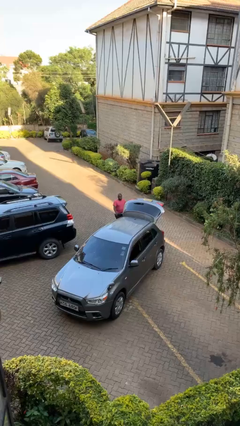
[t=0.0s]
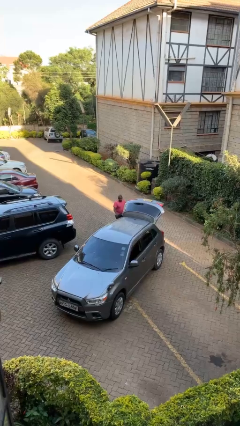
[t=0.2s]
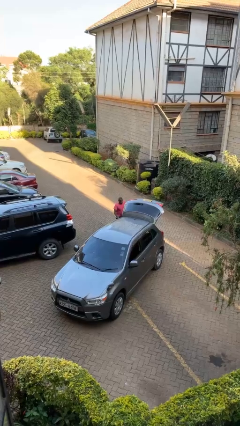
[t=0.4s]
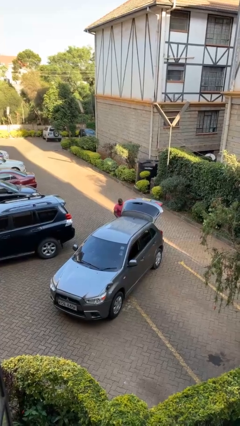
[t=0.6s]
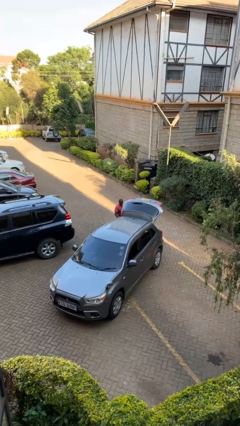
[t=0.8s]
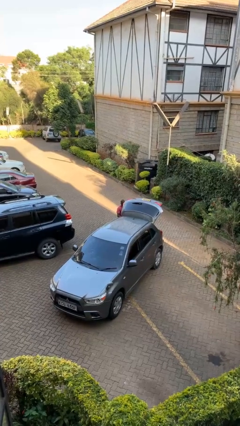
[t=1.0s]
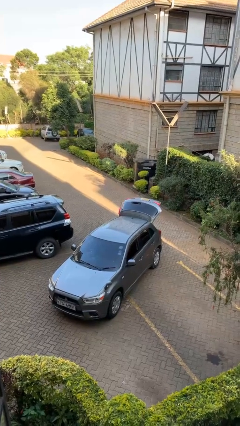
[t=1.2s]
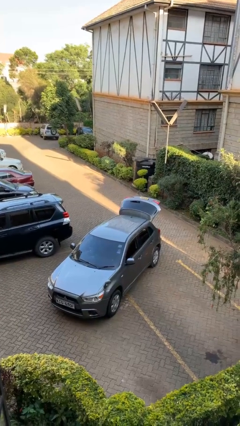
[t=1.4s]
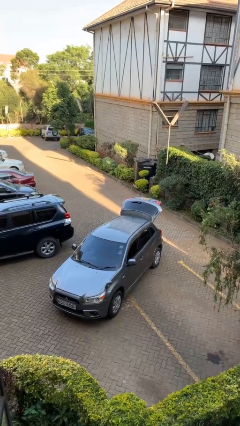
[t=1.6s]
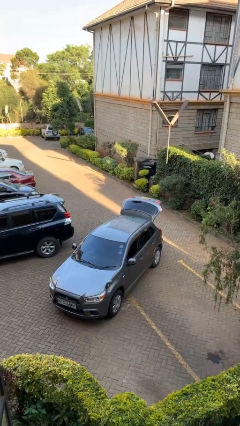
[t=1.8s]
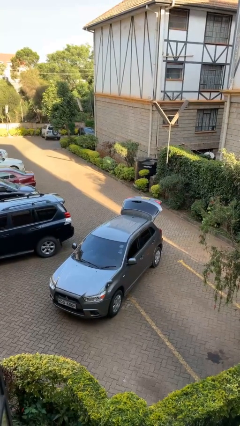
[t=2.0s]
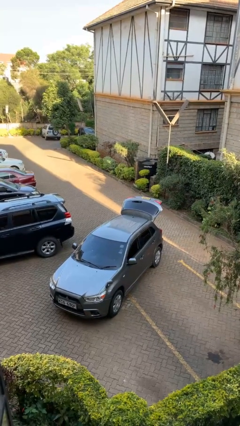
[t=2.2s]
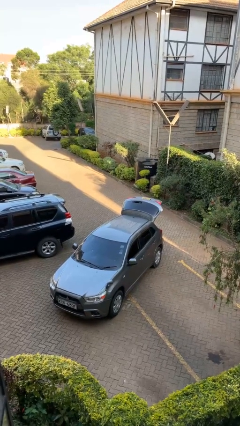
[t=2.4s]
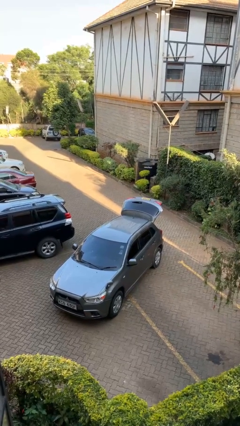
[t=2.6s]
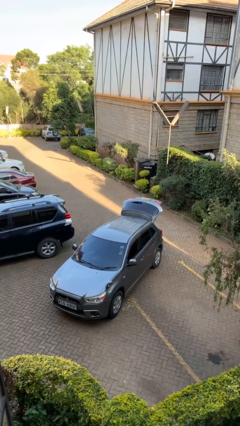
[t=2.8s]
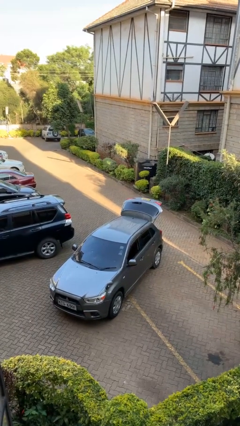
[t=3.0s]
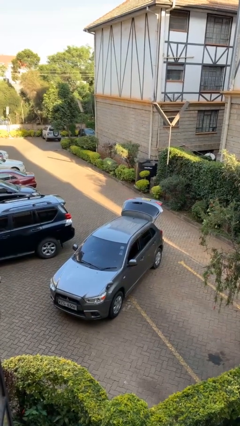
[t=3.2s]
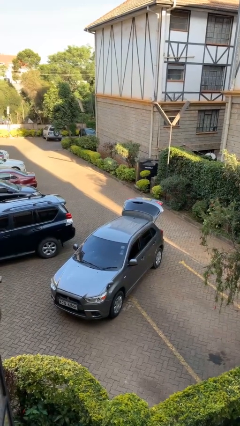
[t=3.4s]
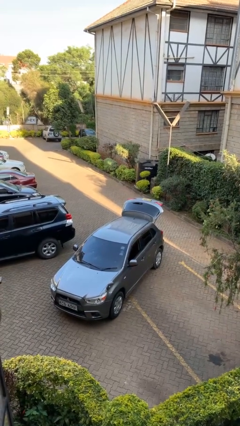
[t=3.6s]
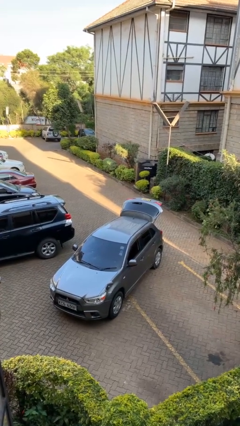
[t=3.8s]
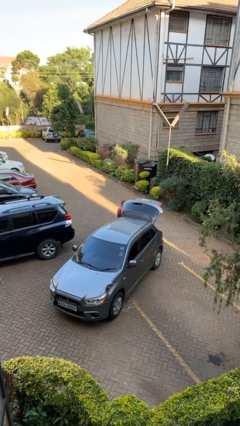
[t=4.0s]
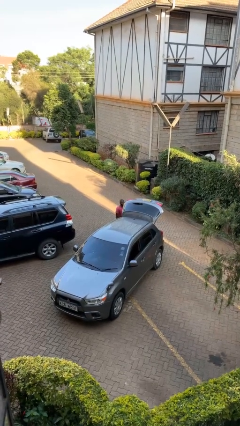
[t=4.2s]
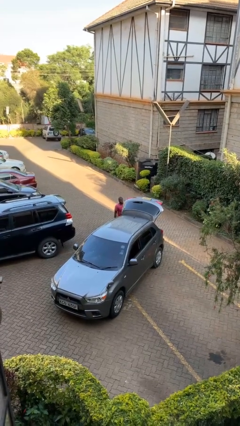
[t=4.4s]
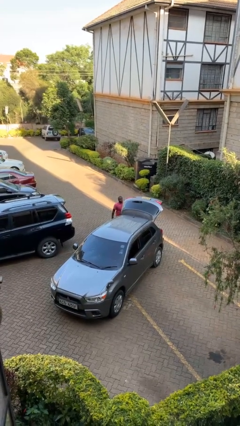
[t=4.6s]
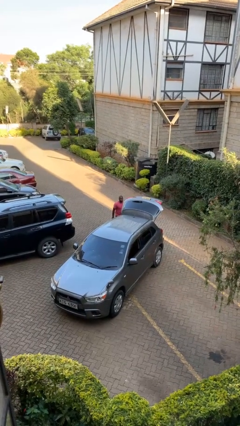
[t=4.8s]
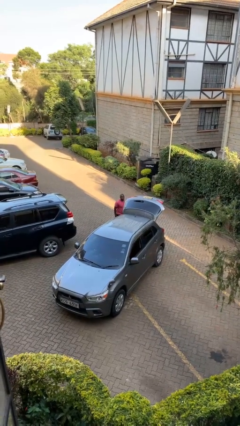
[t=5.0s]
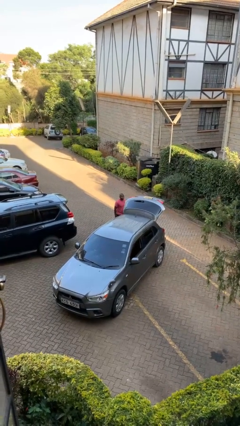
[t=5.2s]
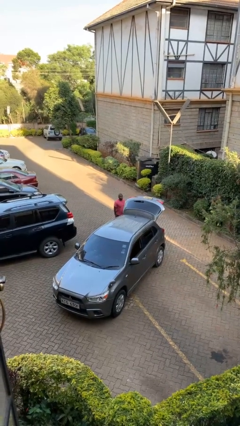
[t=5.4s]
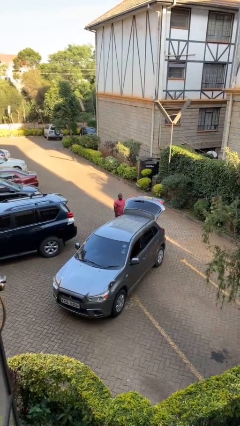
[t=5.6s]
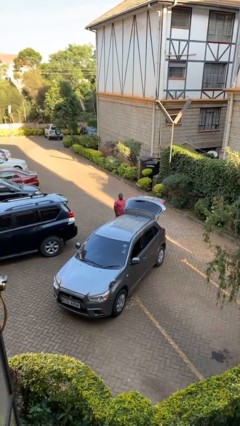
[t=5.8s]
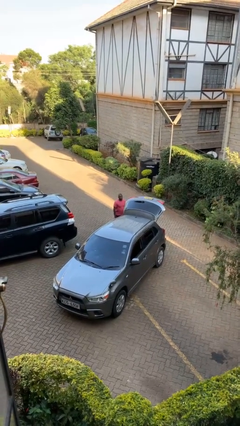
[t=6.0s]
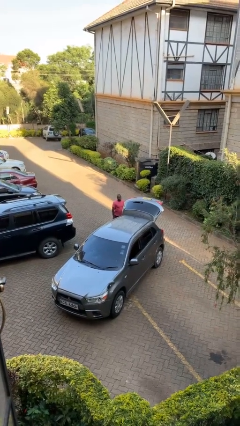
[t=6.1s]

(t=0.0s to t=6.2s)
person loads car

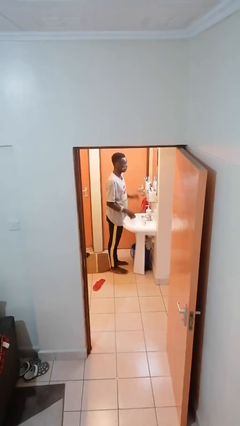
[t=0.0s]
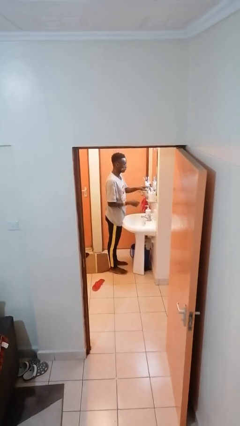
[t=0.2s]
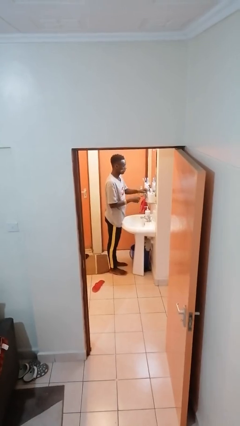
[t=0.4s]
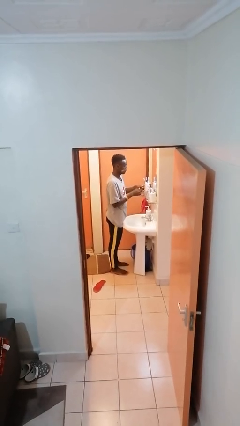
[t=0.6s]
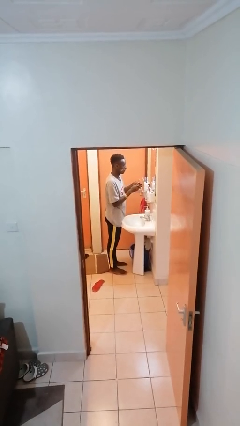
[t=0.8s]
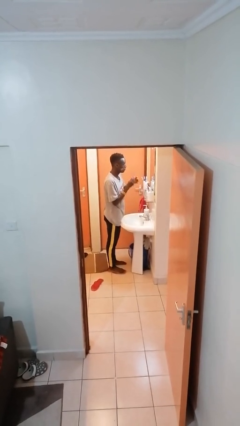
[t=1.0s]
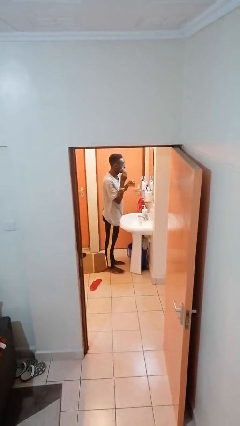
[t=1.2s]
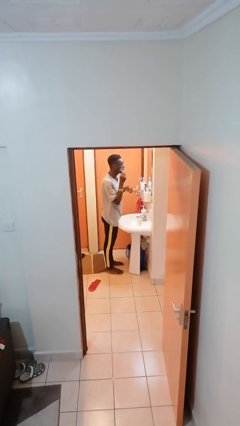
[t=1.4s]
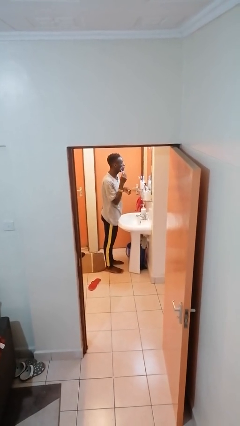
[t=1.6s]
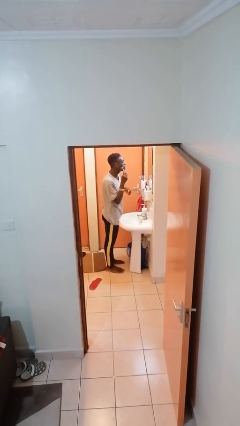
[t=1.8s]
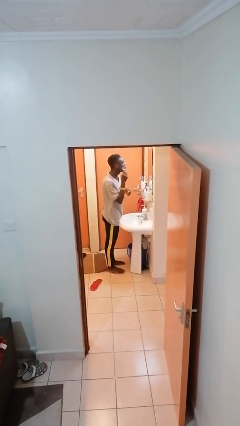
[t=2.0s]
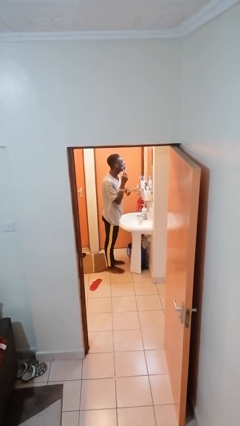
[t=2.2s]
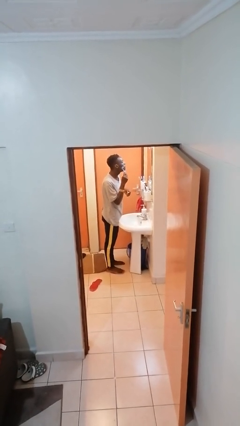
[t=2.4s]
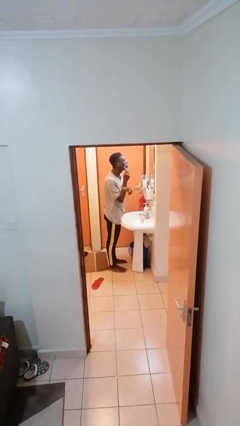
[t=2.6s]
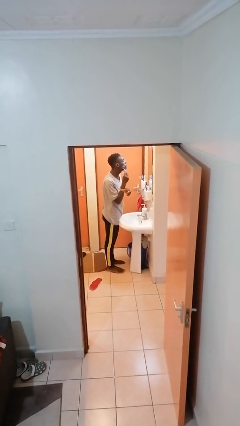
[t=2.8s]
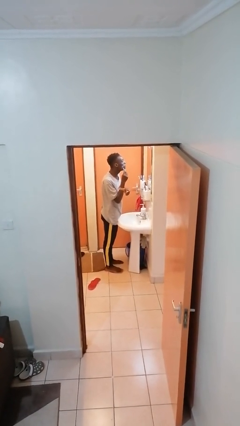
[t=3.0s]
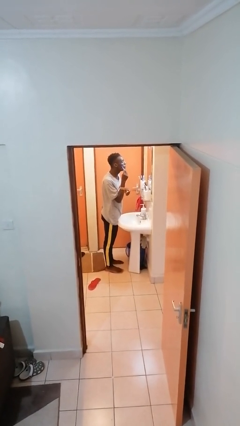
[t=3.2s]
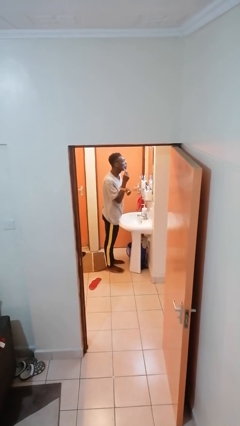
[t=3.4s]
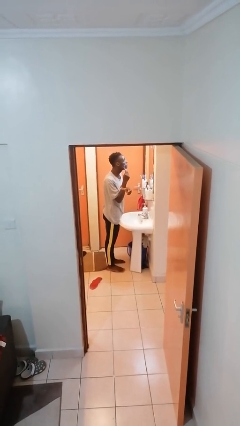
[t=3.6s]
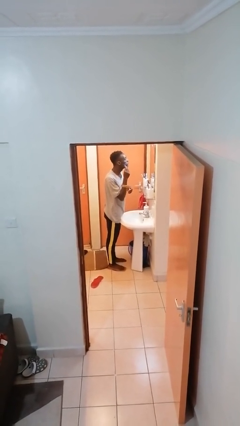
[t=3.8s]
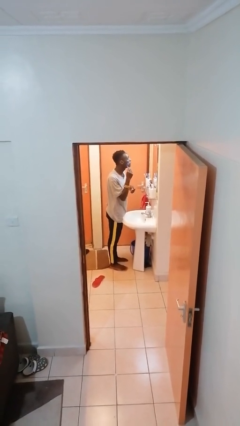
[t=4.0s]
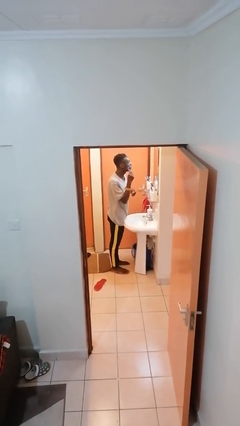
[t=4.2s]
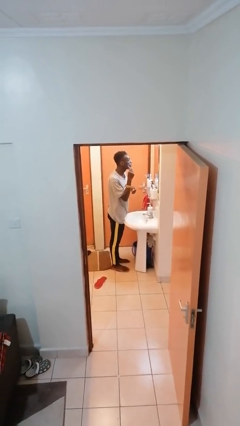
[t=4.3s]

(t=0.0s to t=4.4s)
person shaves face

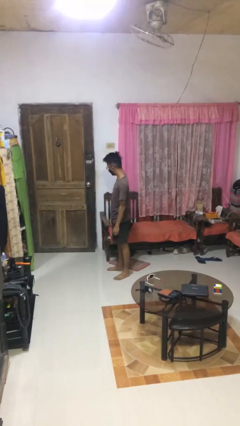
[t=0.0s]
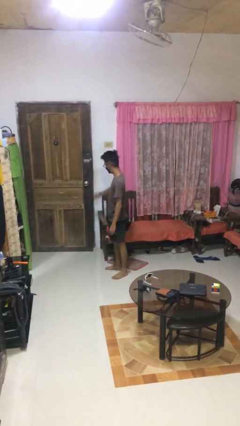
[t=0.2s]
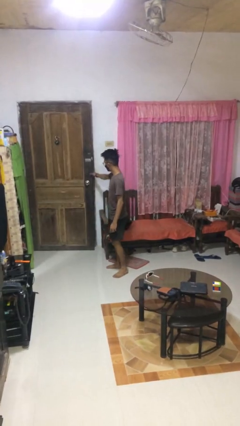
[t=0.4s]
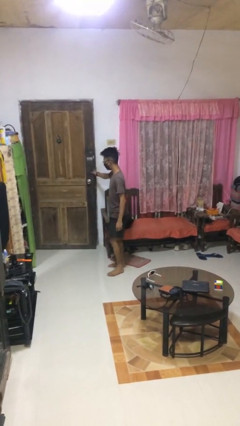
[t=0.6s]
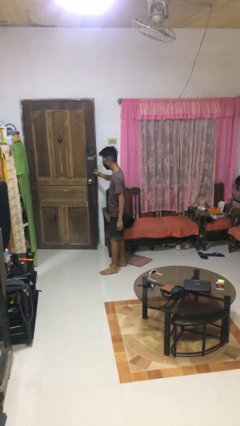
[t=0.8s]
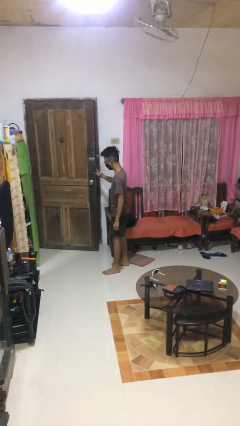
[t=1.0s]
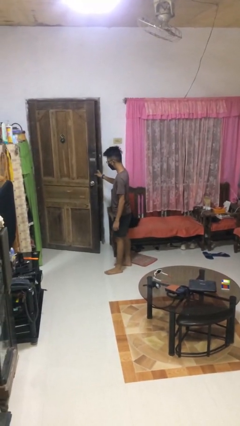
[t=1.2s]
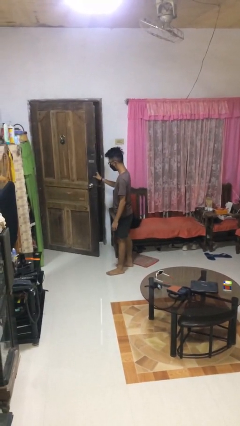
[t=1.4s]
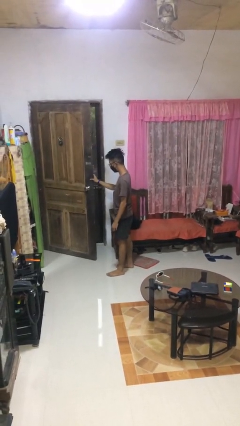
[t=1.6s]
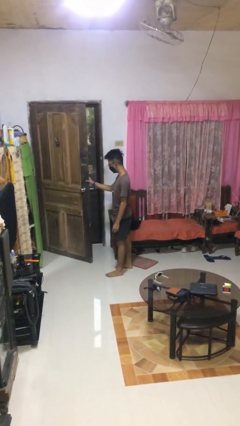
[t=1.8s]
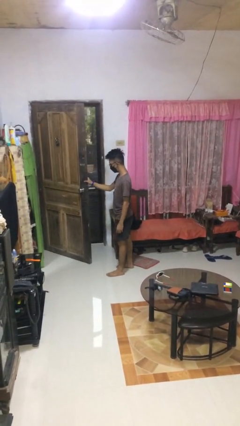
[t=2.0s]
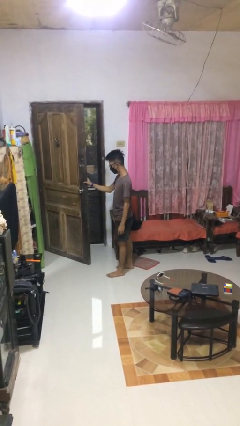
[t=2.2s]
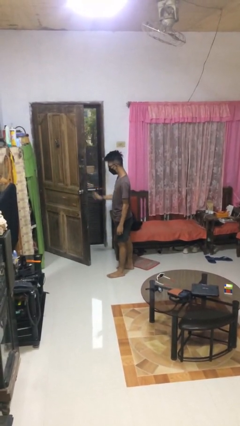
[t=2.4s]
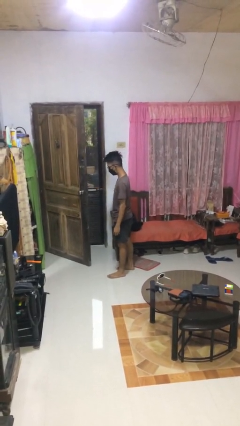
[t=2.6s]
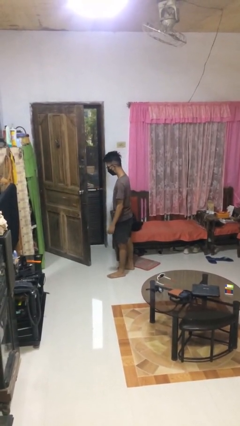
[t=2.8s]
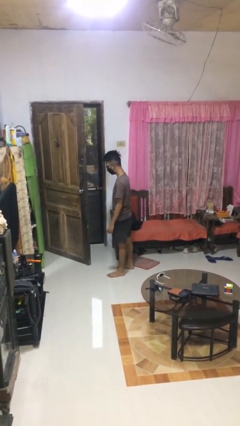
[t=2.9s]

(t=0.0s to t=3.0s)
person opens facility door

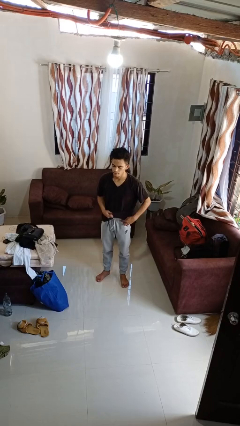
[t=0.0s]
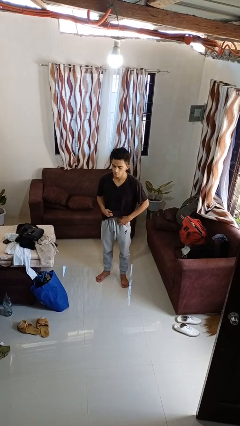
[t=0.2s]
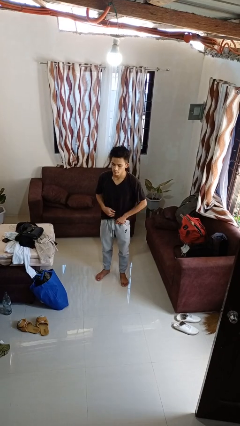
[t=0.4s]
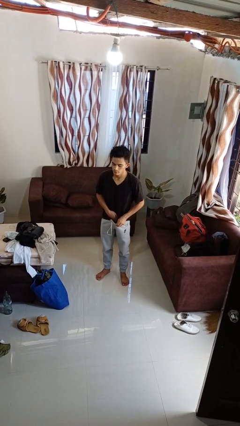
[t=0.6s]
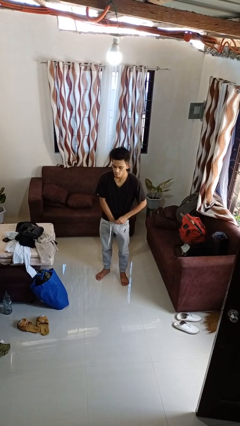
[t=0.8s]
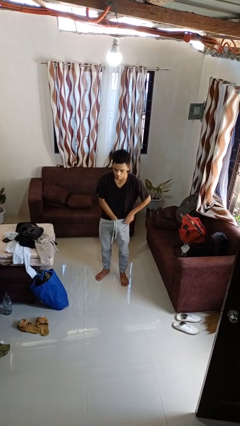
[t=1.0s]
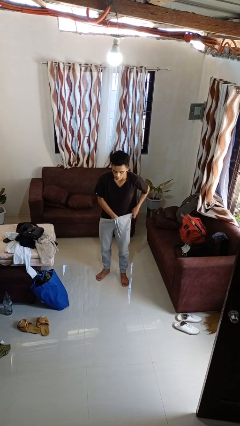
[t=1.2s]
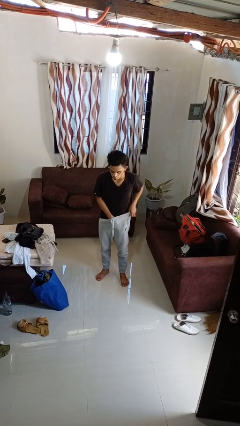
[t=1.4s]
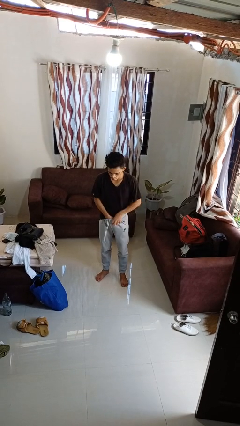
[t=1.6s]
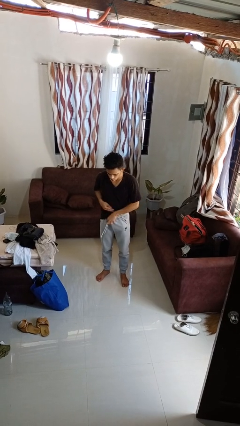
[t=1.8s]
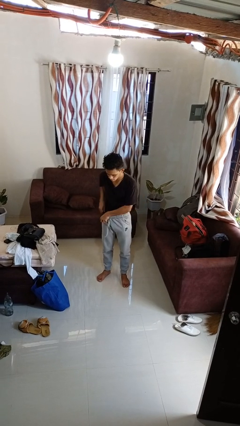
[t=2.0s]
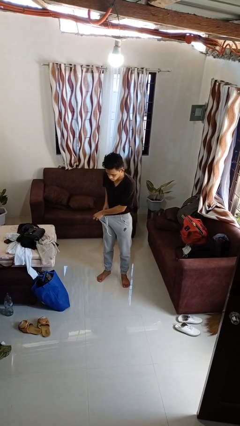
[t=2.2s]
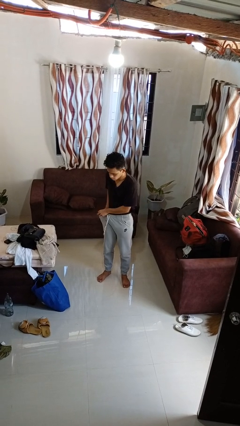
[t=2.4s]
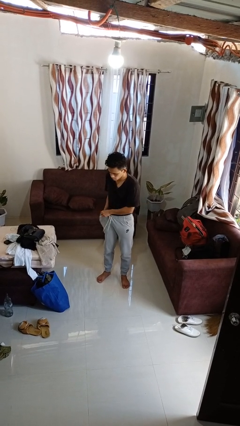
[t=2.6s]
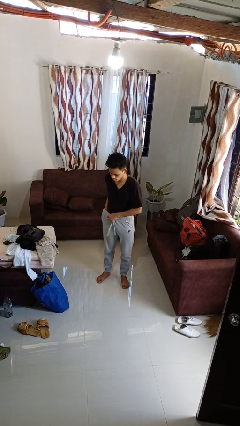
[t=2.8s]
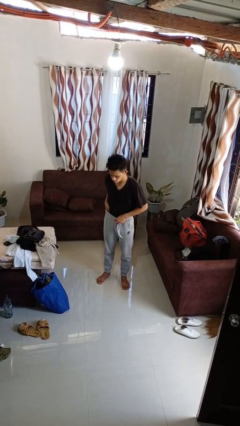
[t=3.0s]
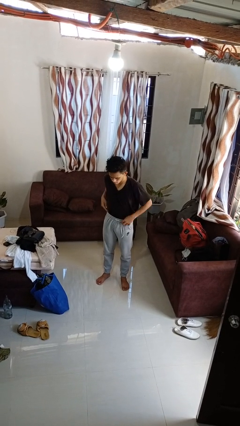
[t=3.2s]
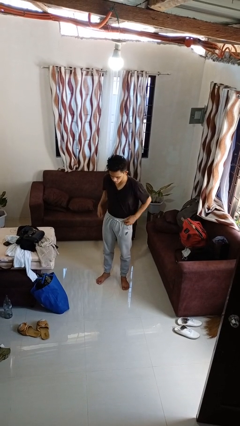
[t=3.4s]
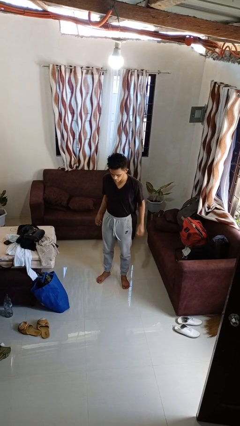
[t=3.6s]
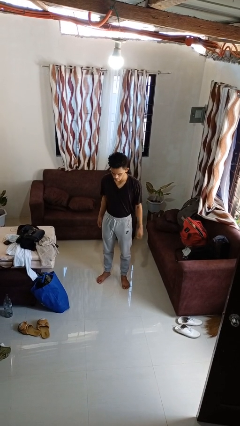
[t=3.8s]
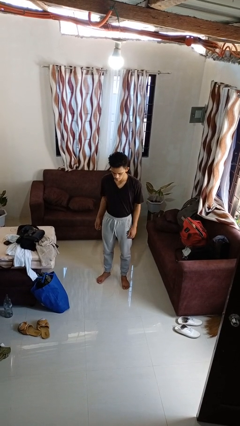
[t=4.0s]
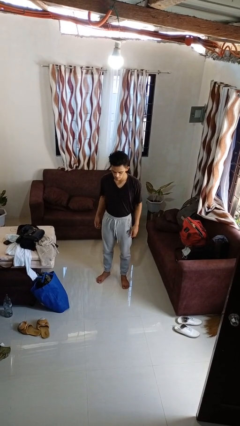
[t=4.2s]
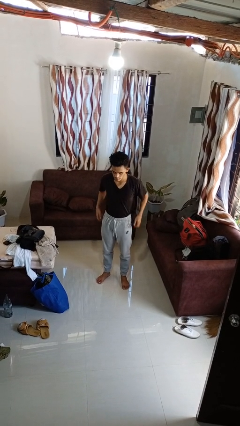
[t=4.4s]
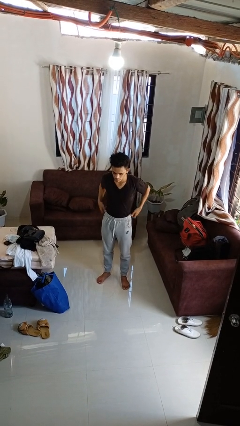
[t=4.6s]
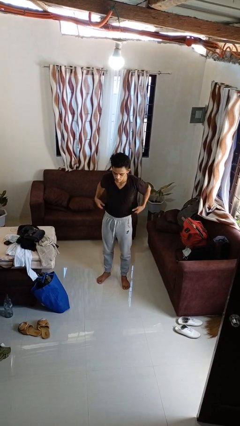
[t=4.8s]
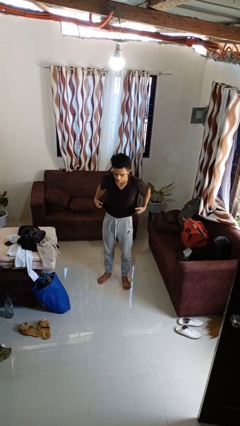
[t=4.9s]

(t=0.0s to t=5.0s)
person tucks in shirt
